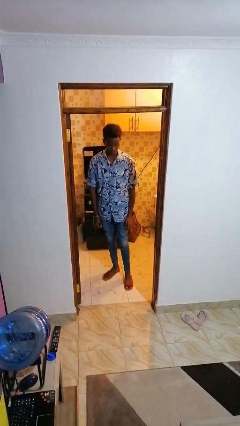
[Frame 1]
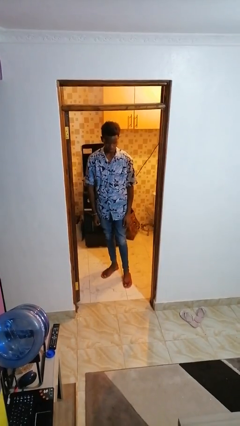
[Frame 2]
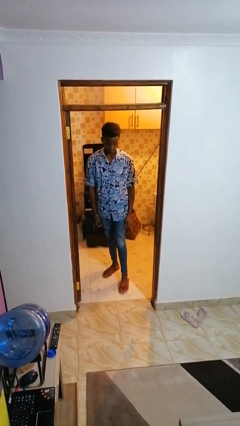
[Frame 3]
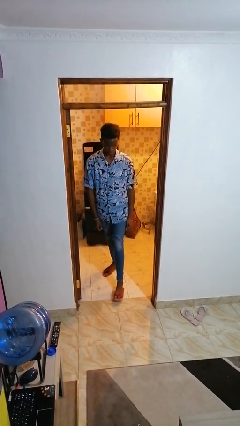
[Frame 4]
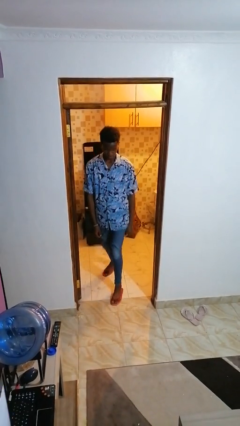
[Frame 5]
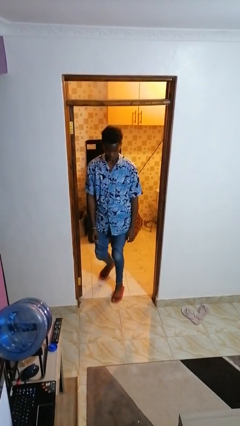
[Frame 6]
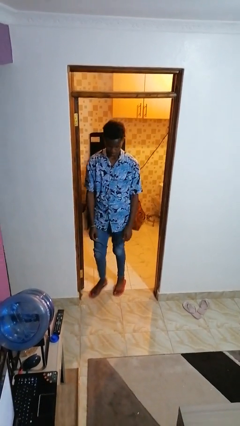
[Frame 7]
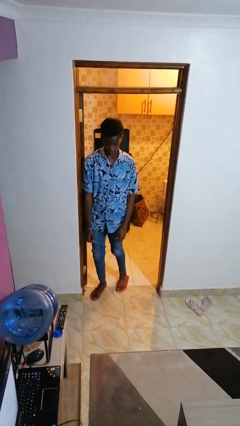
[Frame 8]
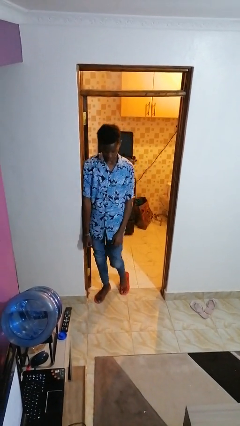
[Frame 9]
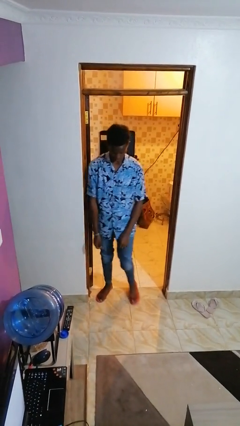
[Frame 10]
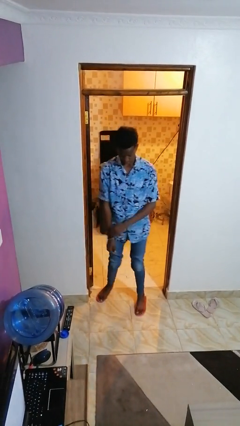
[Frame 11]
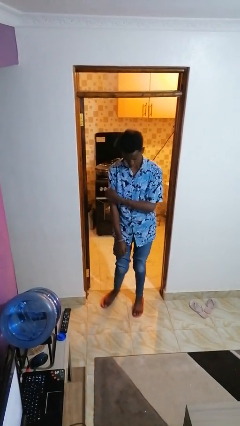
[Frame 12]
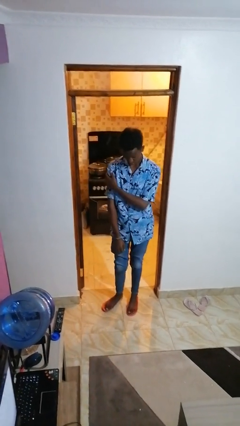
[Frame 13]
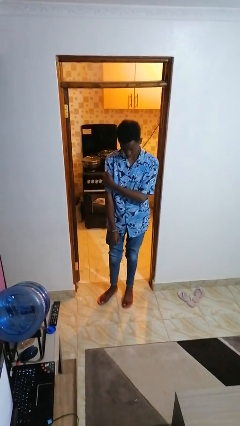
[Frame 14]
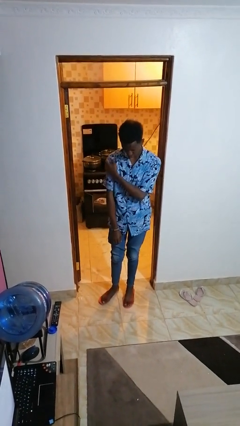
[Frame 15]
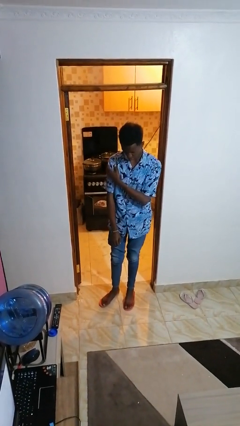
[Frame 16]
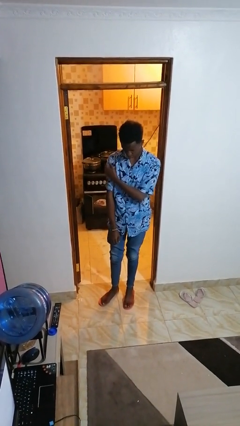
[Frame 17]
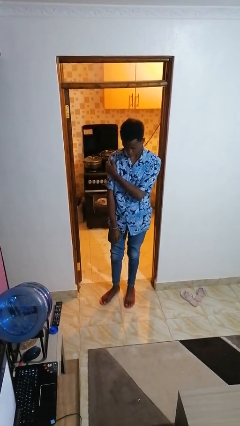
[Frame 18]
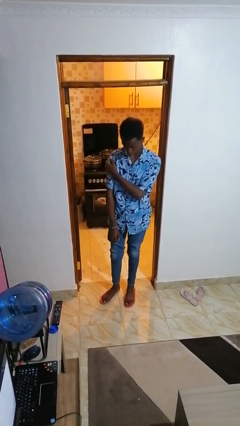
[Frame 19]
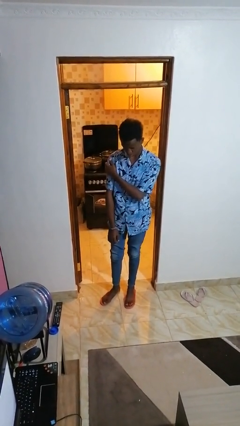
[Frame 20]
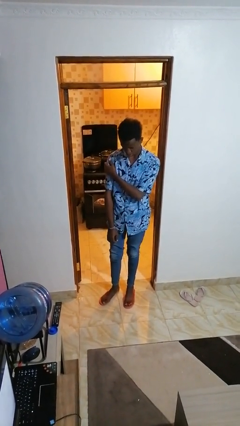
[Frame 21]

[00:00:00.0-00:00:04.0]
person bumps into wall

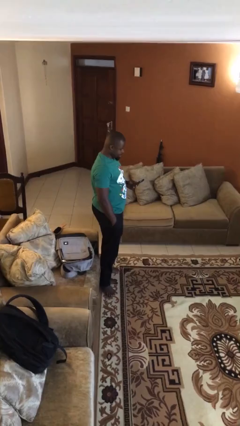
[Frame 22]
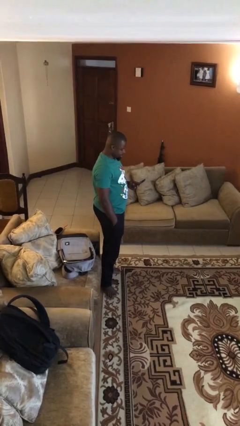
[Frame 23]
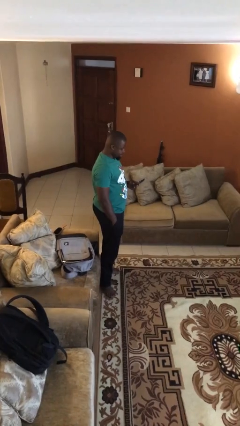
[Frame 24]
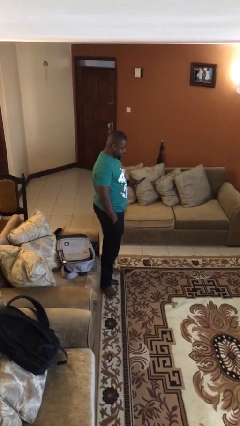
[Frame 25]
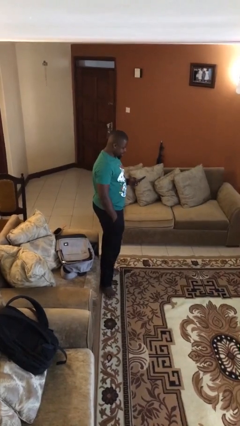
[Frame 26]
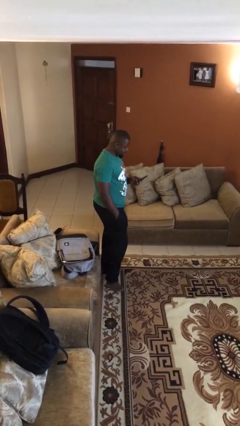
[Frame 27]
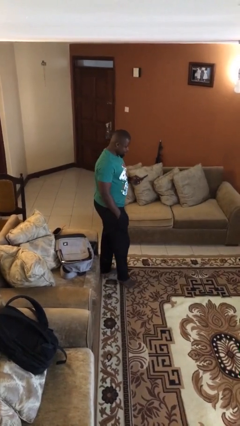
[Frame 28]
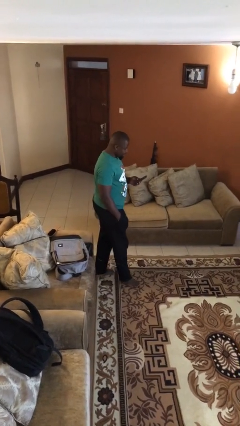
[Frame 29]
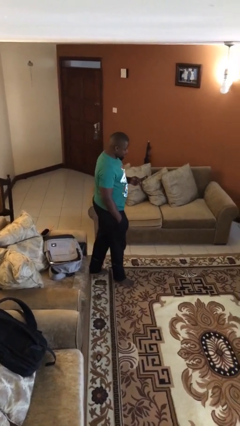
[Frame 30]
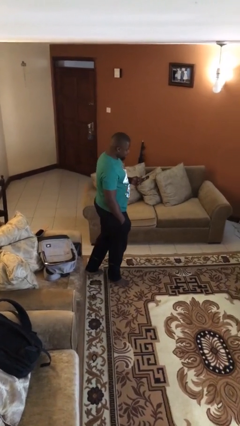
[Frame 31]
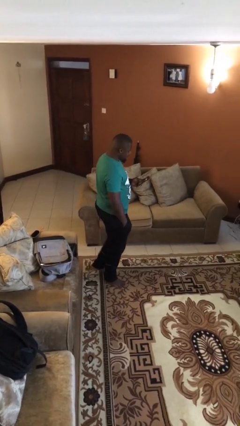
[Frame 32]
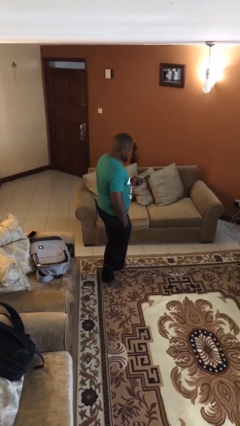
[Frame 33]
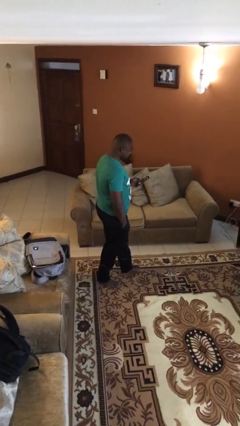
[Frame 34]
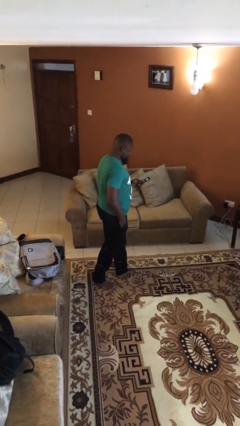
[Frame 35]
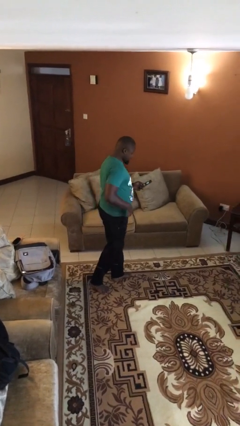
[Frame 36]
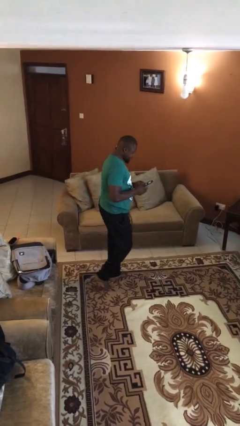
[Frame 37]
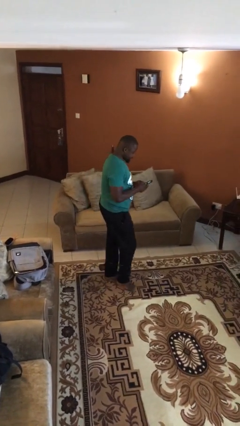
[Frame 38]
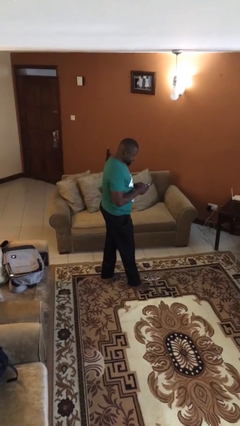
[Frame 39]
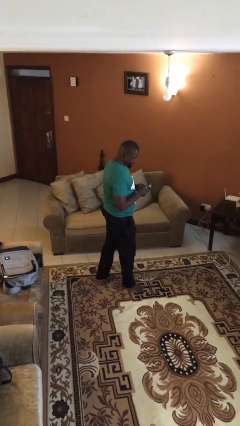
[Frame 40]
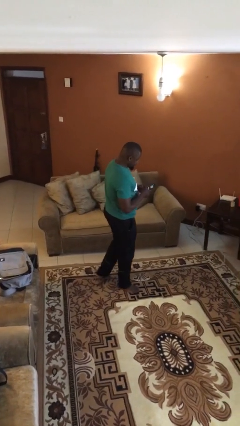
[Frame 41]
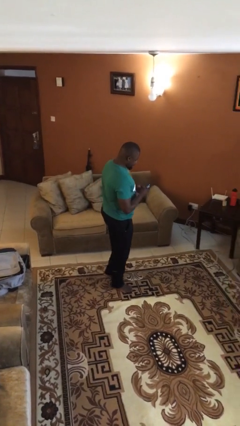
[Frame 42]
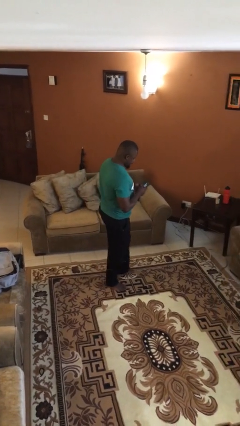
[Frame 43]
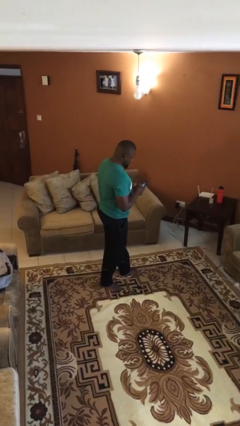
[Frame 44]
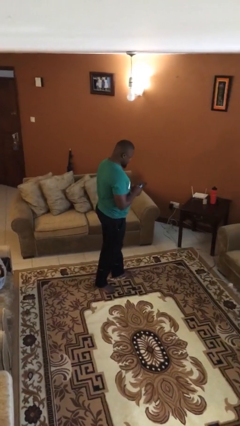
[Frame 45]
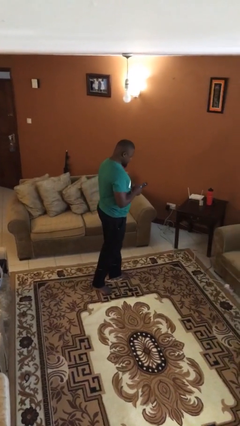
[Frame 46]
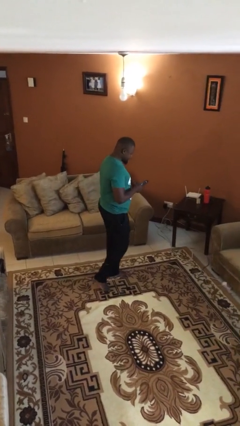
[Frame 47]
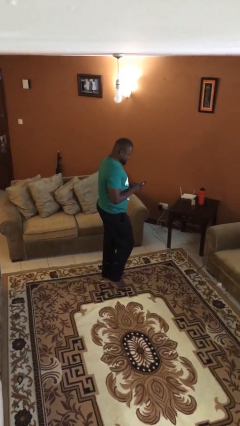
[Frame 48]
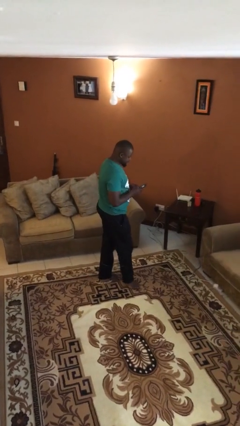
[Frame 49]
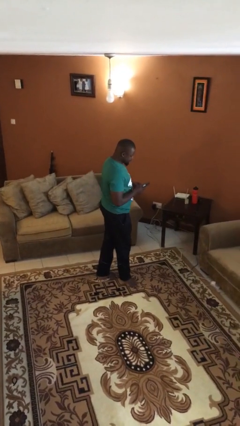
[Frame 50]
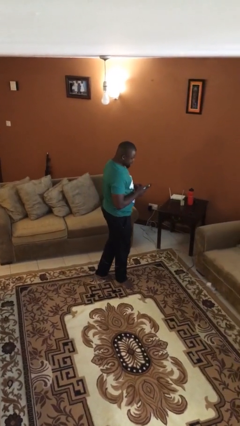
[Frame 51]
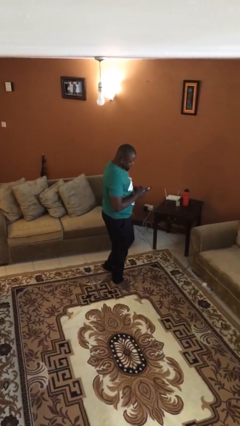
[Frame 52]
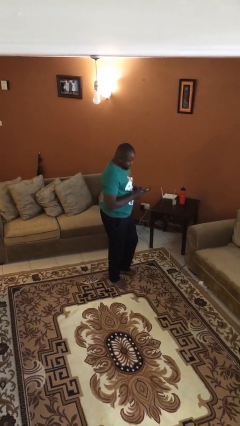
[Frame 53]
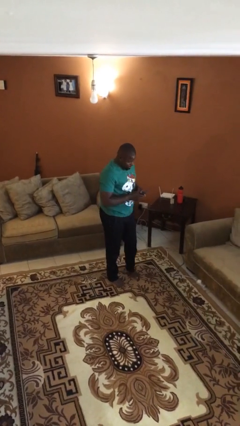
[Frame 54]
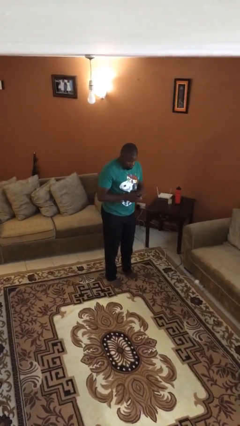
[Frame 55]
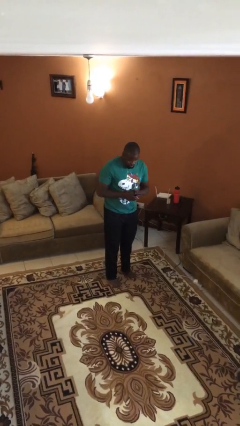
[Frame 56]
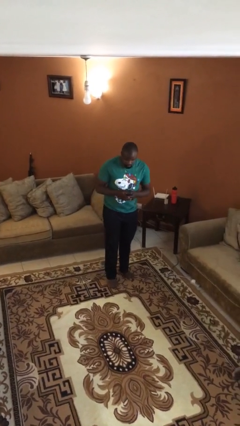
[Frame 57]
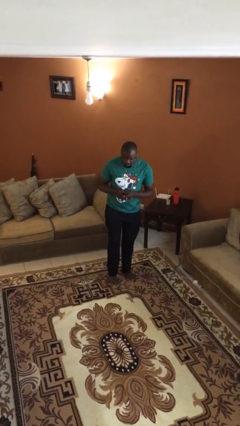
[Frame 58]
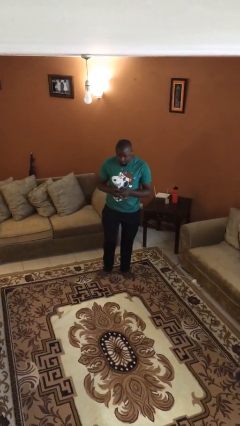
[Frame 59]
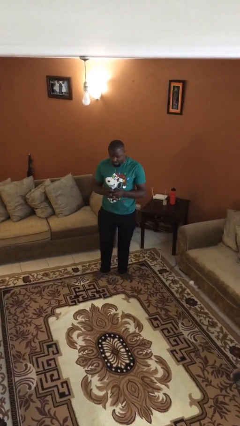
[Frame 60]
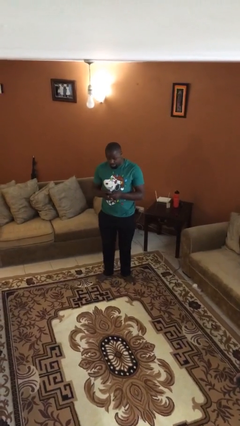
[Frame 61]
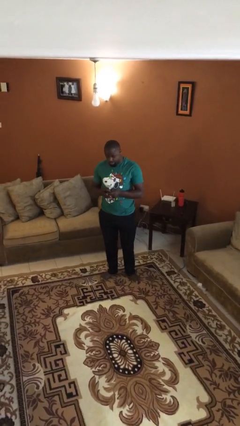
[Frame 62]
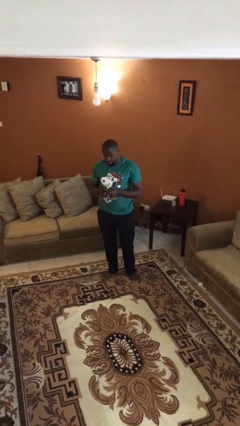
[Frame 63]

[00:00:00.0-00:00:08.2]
person texts on phone

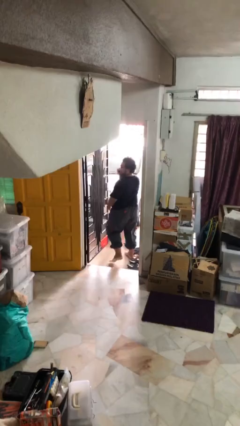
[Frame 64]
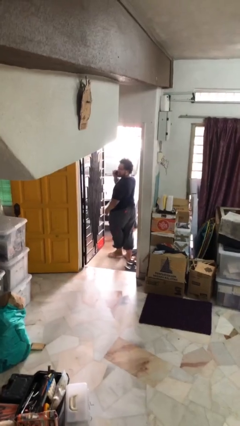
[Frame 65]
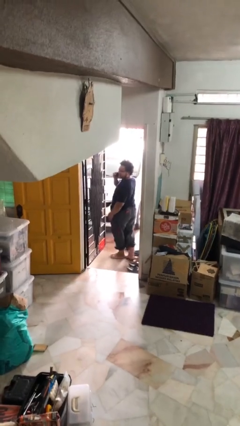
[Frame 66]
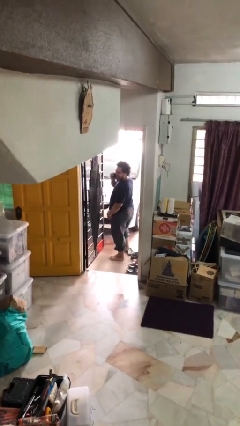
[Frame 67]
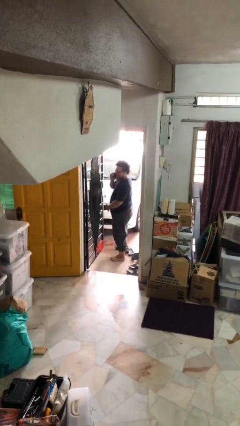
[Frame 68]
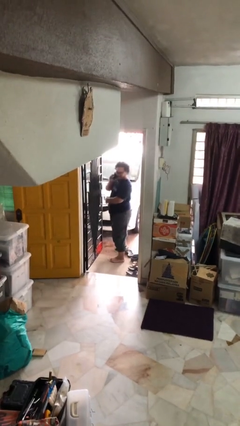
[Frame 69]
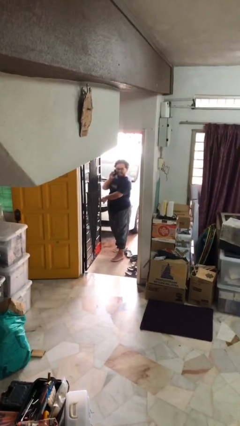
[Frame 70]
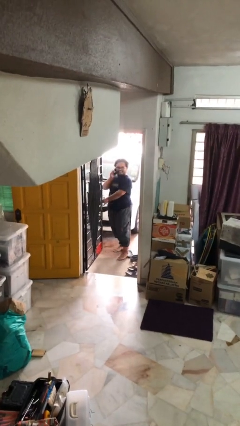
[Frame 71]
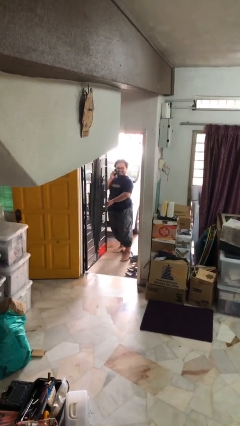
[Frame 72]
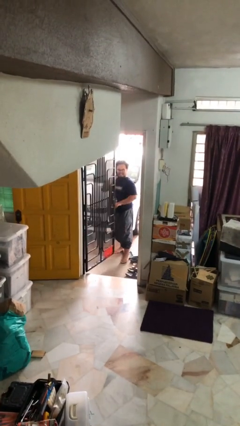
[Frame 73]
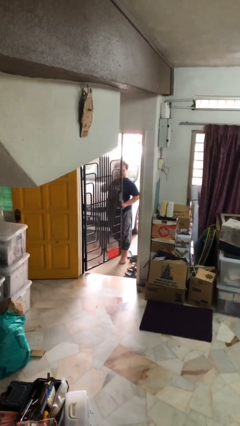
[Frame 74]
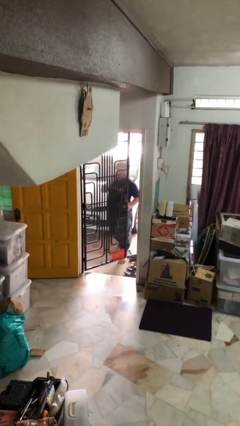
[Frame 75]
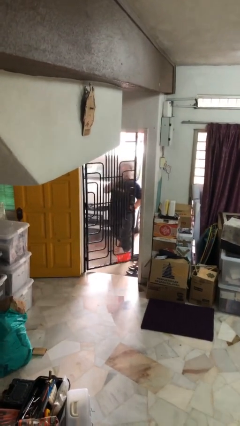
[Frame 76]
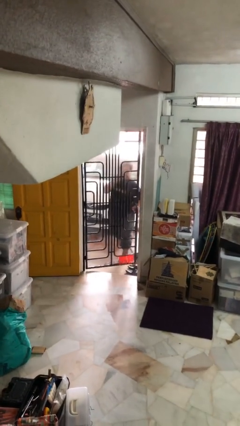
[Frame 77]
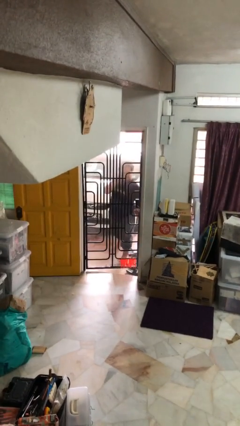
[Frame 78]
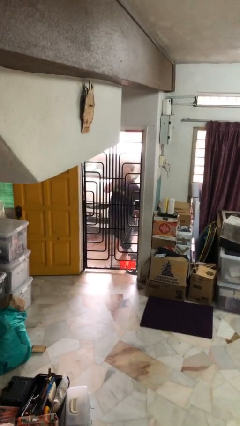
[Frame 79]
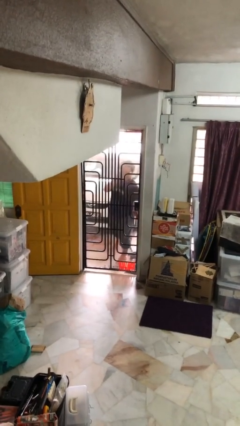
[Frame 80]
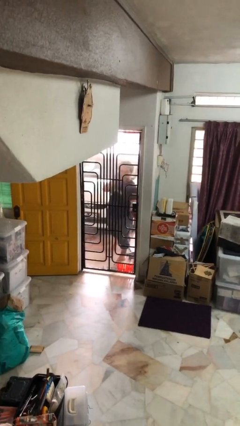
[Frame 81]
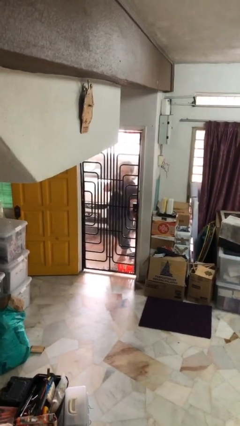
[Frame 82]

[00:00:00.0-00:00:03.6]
person closes facility door

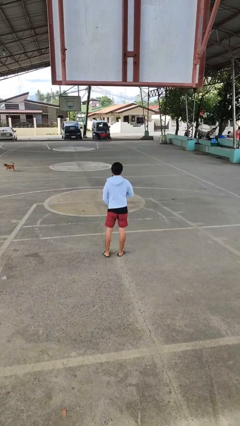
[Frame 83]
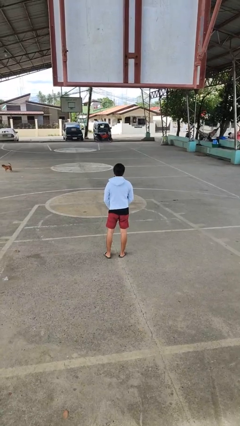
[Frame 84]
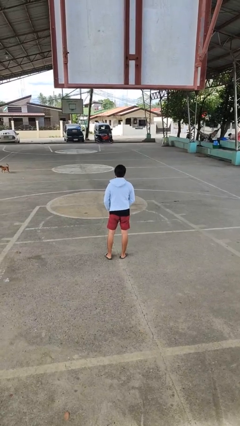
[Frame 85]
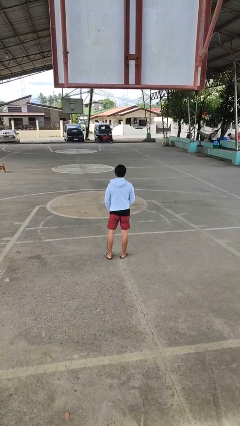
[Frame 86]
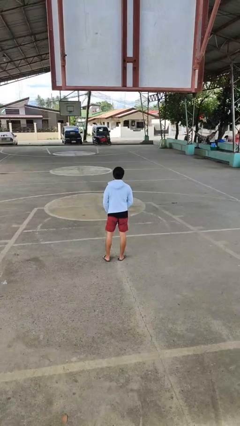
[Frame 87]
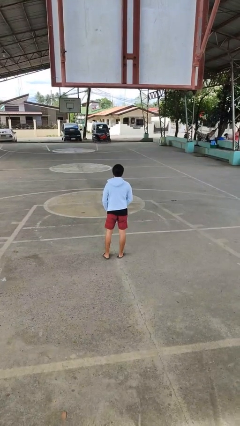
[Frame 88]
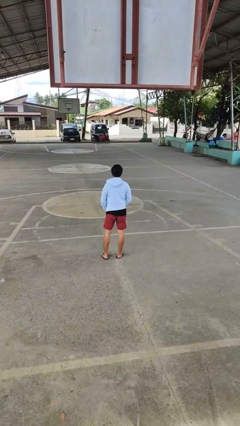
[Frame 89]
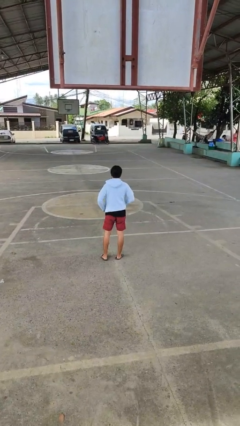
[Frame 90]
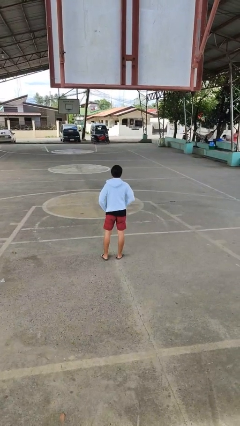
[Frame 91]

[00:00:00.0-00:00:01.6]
person unzips jacket

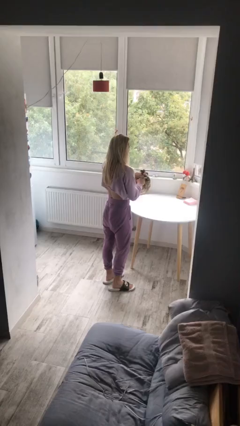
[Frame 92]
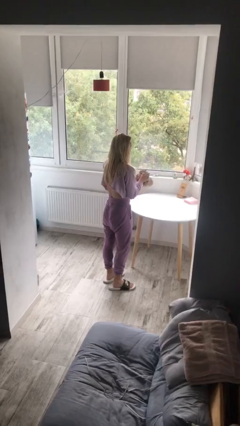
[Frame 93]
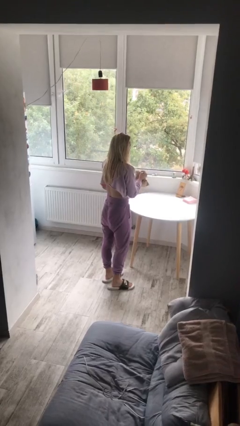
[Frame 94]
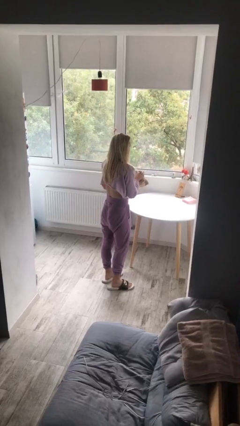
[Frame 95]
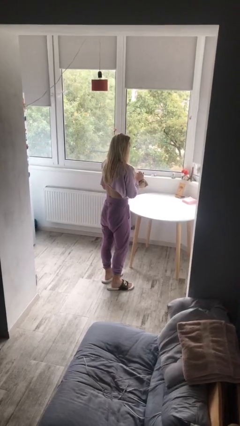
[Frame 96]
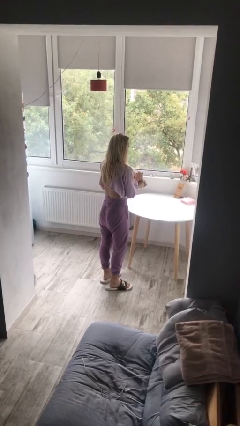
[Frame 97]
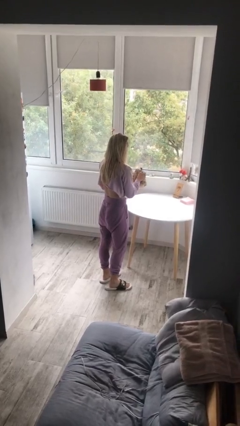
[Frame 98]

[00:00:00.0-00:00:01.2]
person crumples paper
